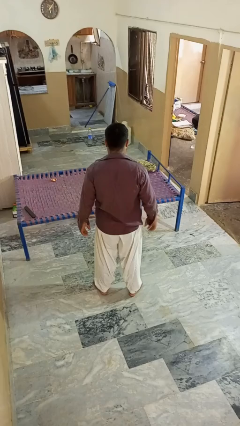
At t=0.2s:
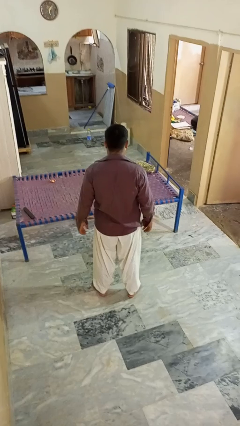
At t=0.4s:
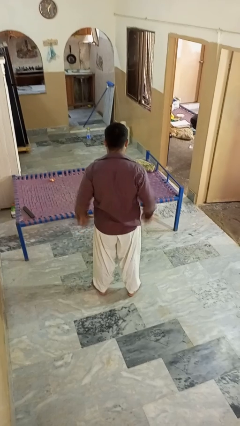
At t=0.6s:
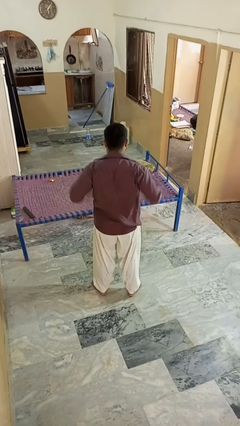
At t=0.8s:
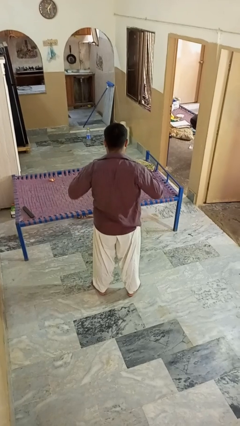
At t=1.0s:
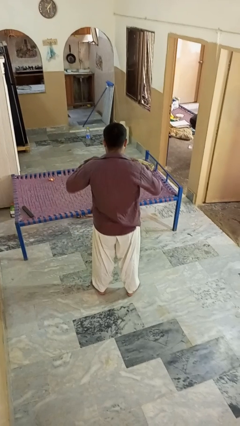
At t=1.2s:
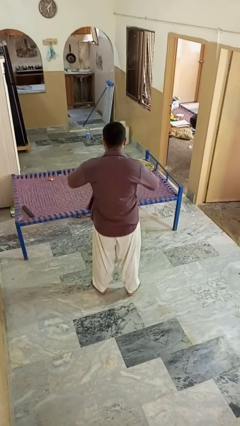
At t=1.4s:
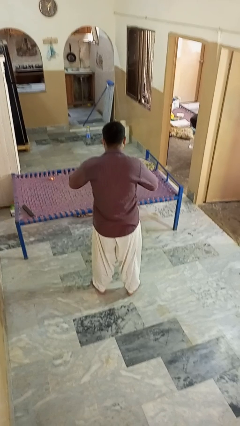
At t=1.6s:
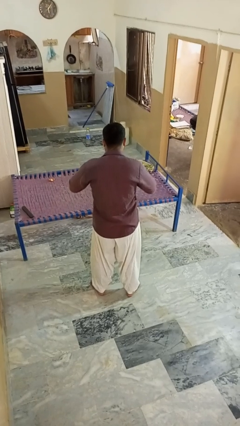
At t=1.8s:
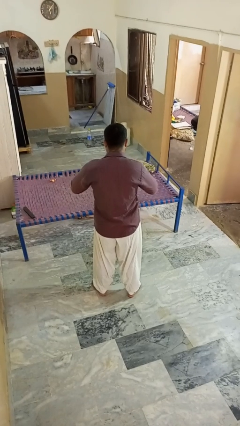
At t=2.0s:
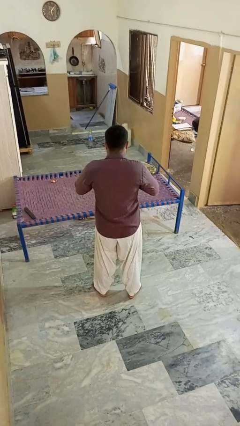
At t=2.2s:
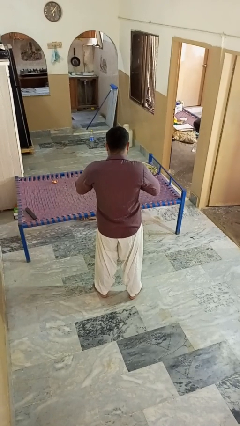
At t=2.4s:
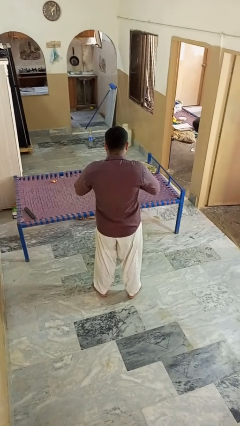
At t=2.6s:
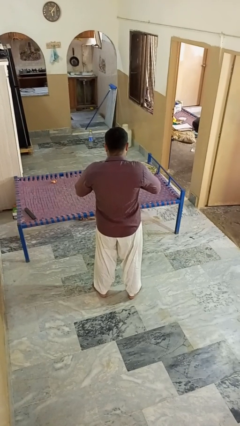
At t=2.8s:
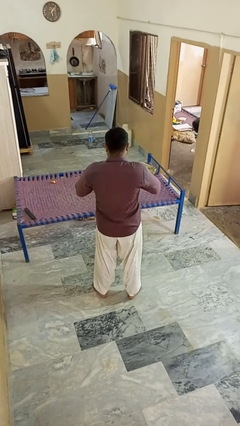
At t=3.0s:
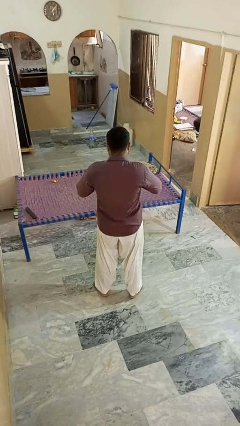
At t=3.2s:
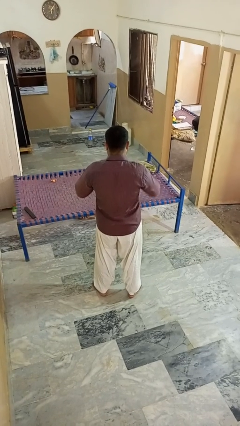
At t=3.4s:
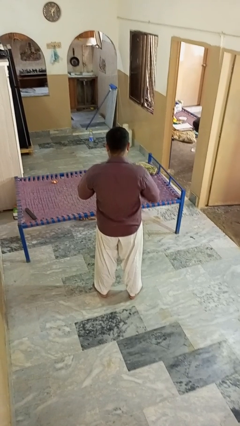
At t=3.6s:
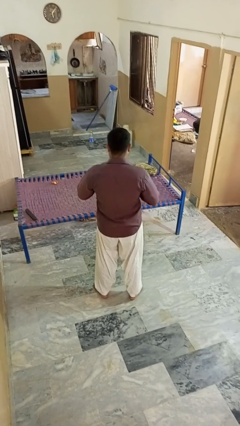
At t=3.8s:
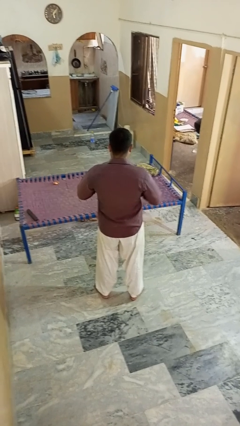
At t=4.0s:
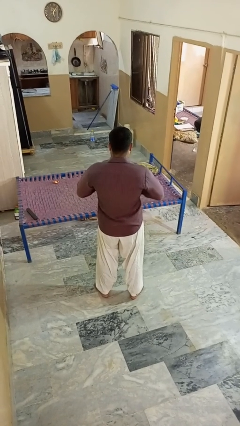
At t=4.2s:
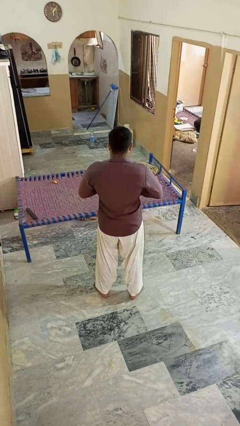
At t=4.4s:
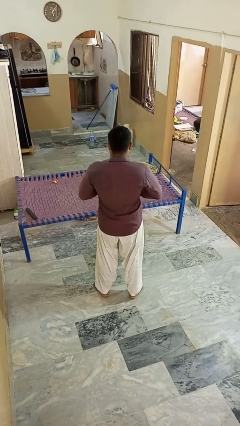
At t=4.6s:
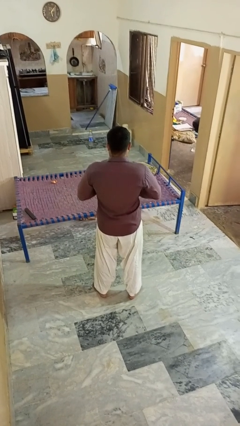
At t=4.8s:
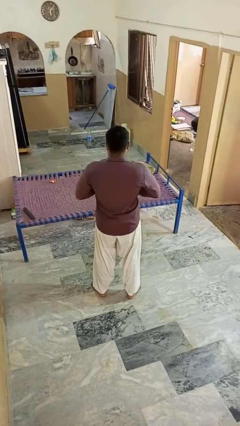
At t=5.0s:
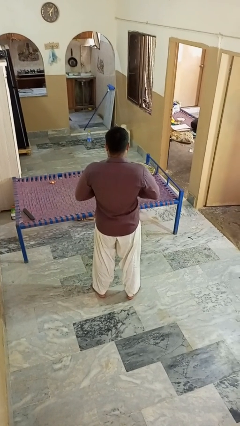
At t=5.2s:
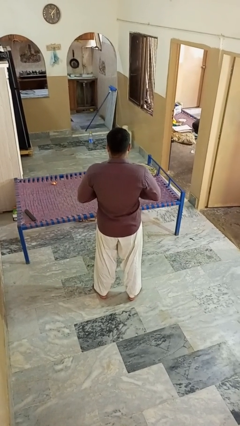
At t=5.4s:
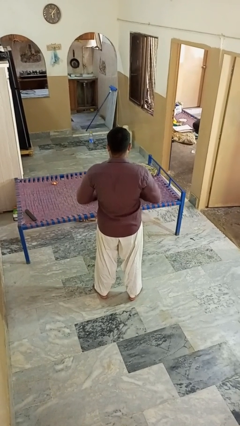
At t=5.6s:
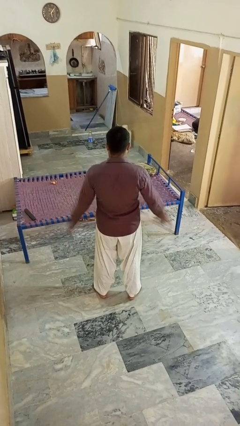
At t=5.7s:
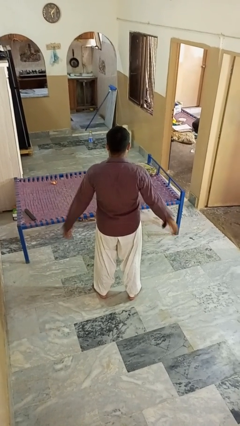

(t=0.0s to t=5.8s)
person buttons shirt

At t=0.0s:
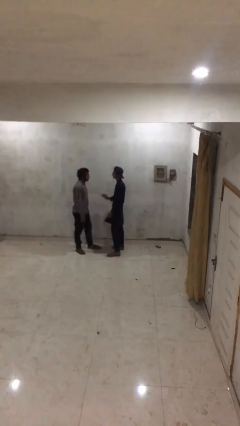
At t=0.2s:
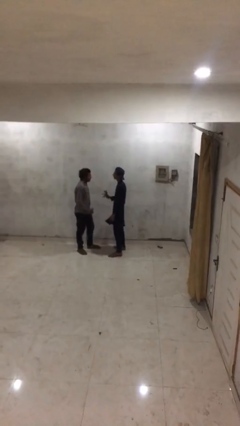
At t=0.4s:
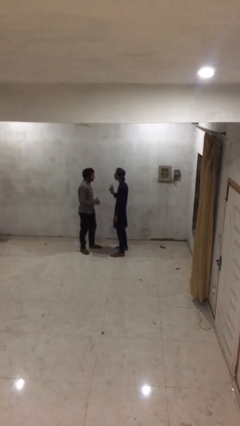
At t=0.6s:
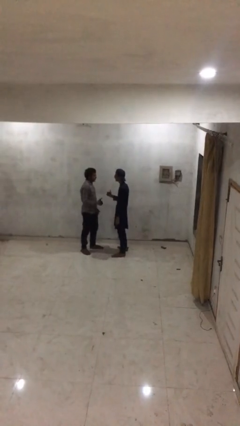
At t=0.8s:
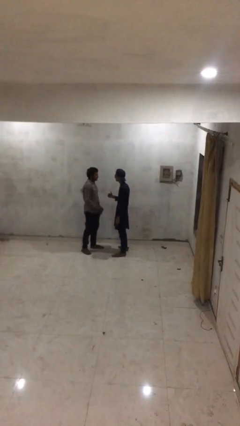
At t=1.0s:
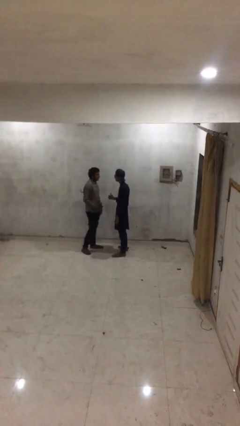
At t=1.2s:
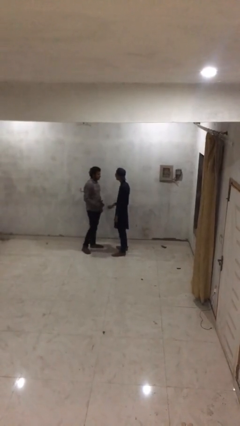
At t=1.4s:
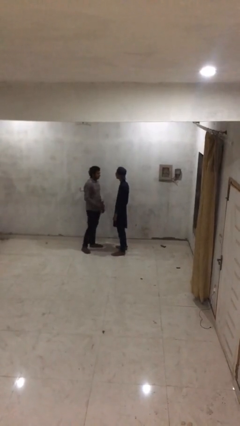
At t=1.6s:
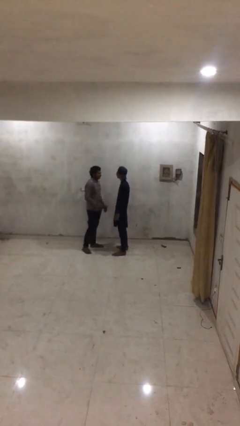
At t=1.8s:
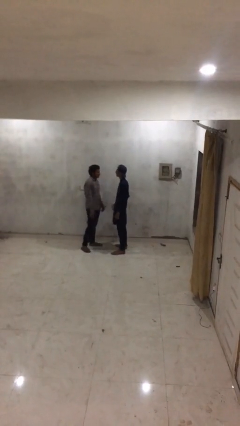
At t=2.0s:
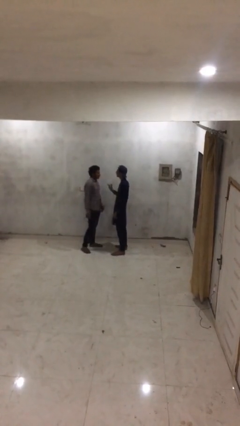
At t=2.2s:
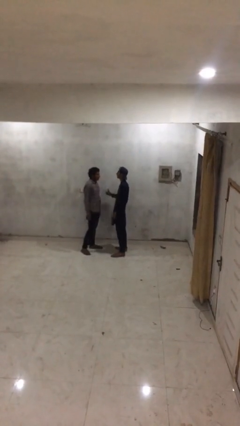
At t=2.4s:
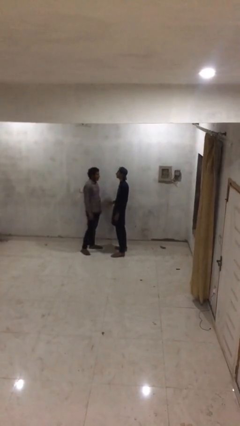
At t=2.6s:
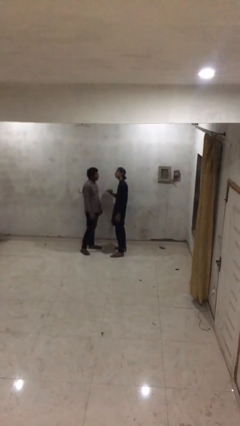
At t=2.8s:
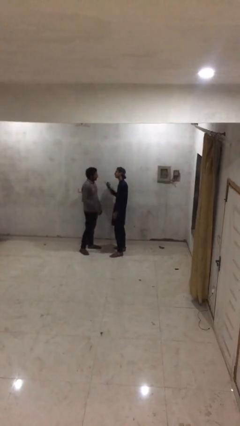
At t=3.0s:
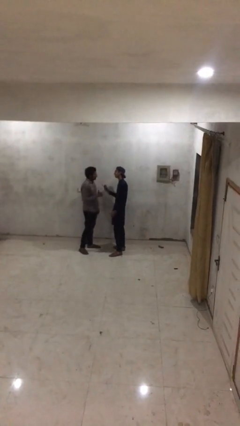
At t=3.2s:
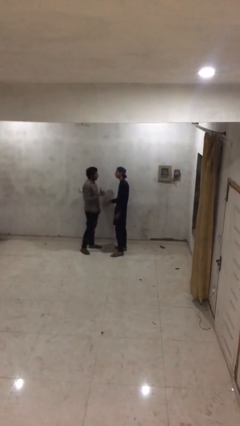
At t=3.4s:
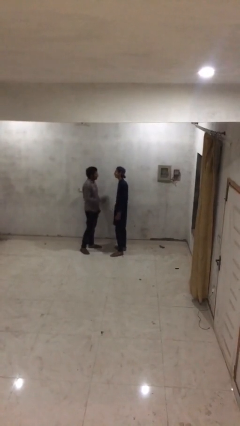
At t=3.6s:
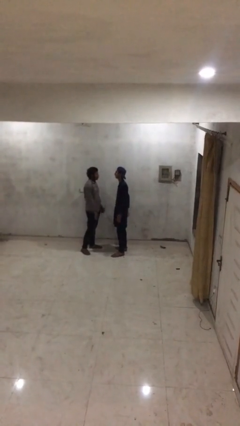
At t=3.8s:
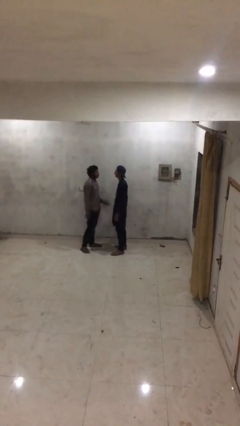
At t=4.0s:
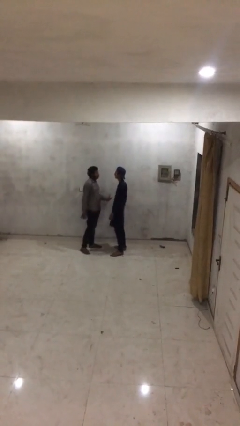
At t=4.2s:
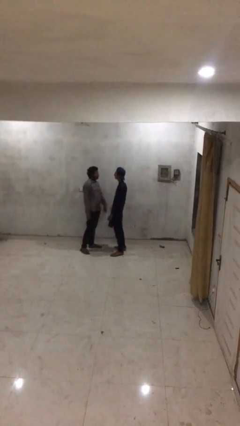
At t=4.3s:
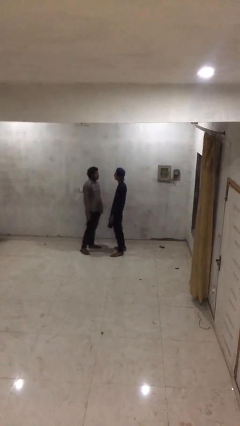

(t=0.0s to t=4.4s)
person talks to person

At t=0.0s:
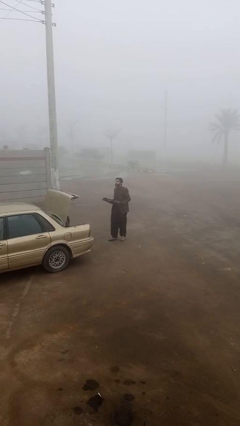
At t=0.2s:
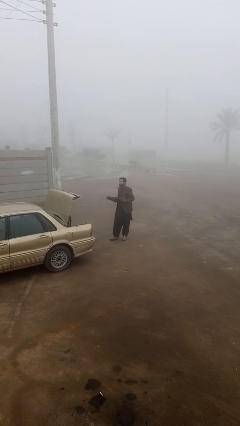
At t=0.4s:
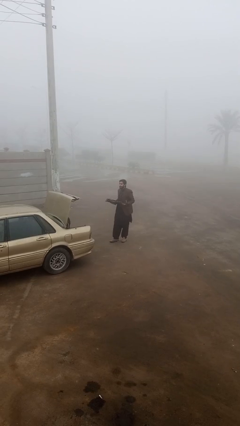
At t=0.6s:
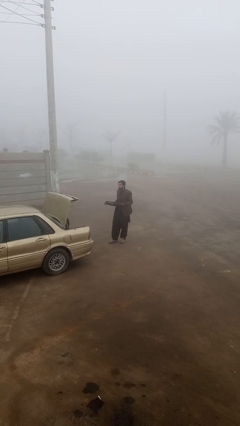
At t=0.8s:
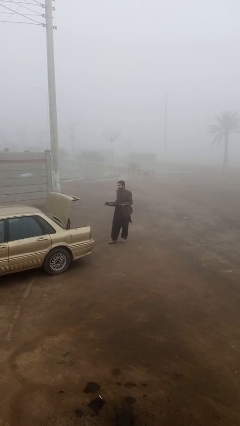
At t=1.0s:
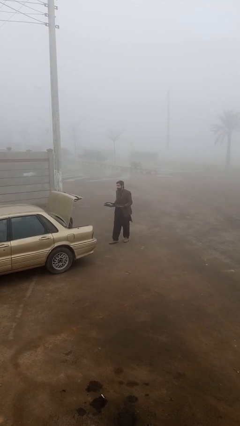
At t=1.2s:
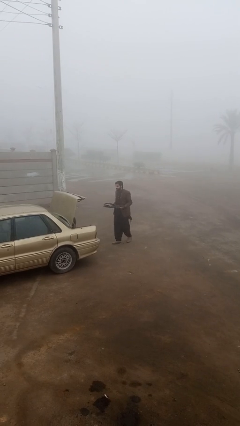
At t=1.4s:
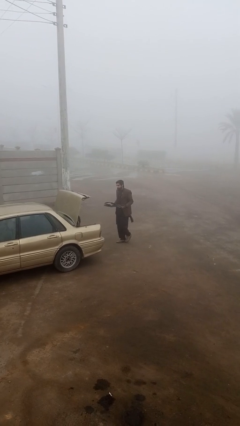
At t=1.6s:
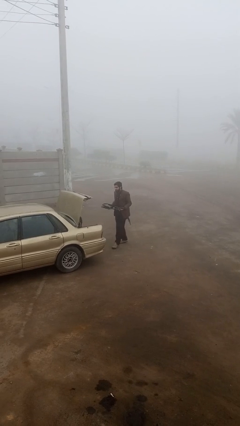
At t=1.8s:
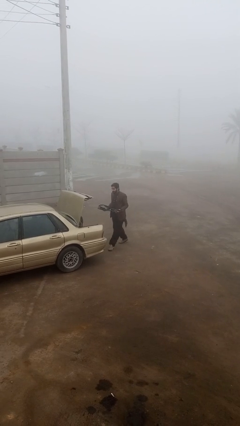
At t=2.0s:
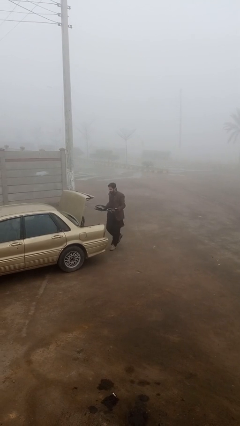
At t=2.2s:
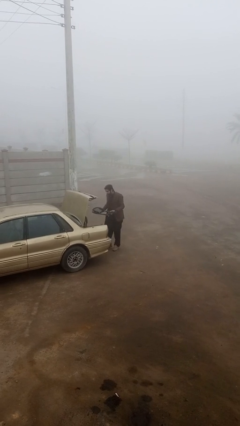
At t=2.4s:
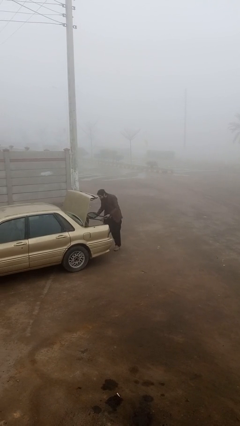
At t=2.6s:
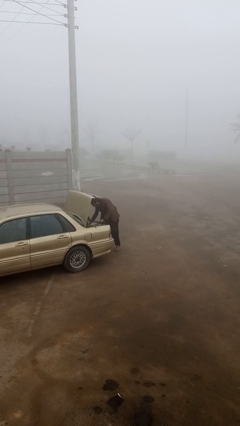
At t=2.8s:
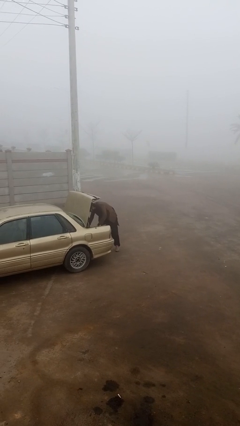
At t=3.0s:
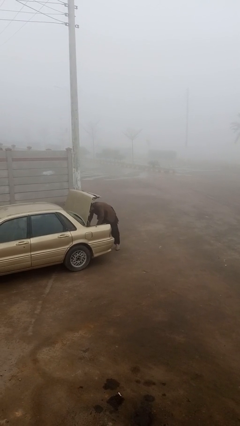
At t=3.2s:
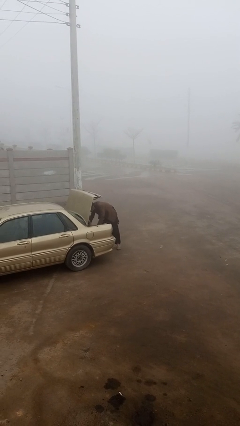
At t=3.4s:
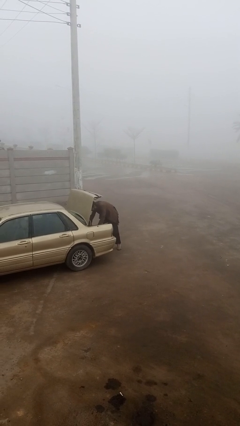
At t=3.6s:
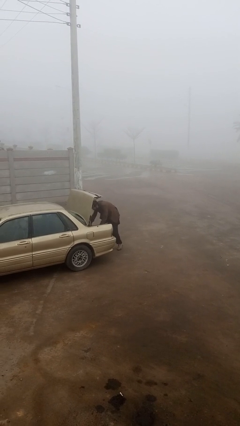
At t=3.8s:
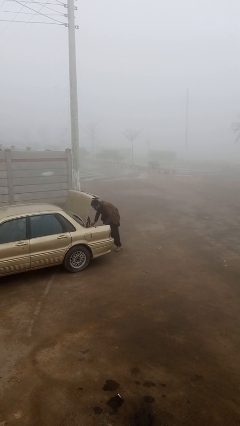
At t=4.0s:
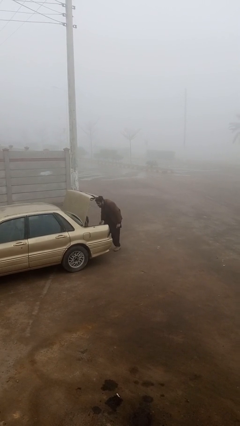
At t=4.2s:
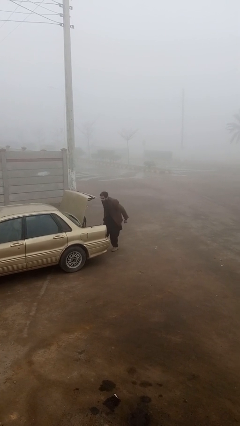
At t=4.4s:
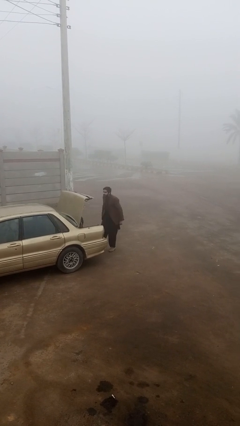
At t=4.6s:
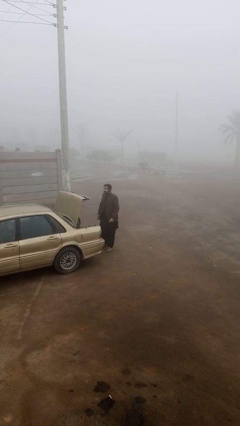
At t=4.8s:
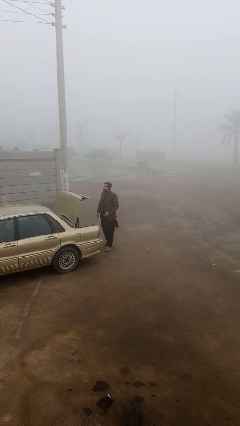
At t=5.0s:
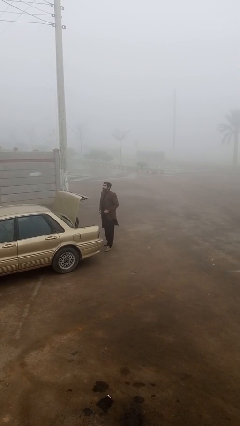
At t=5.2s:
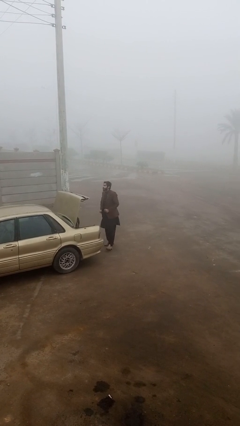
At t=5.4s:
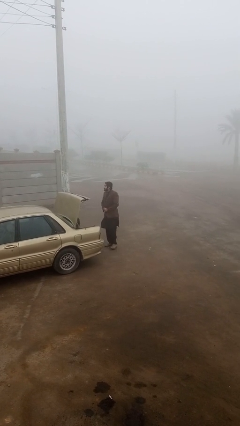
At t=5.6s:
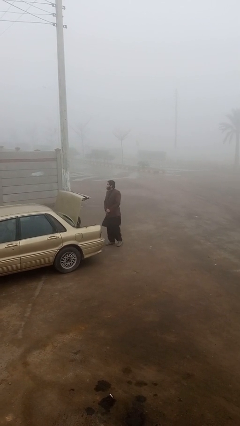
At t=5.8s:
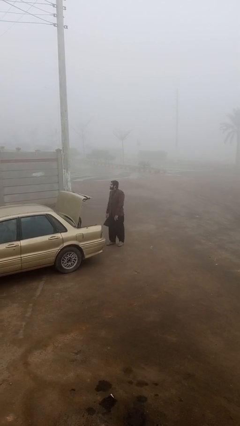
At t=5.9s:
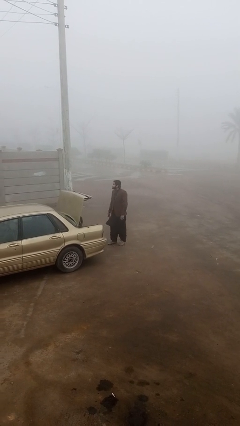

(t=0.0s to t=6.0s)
person loads car

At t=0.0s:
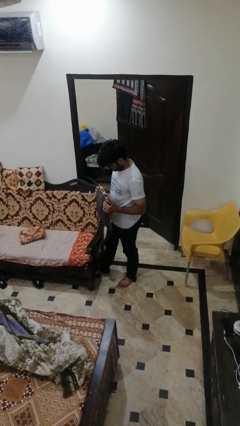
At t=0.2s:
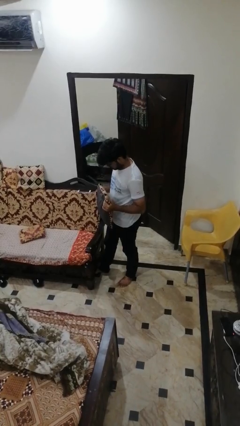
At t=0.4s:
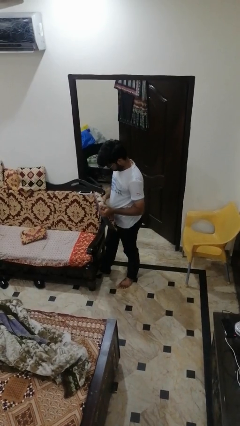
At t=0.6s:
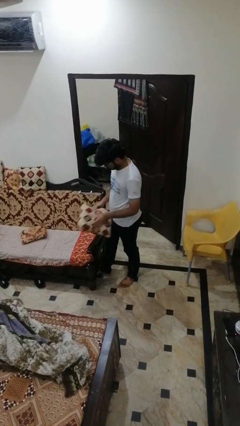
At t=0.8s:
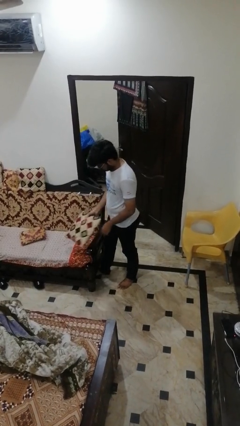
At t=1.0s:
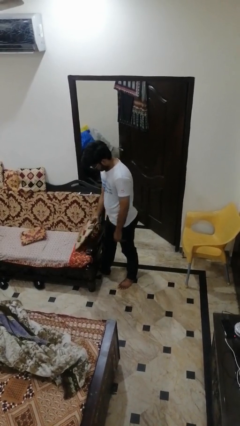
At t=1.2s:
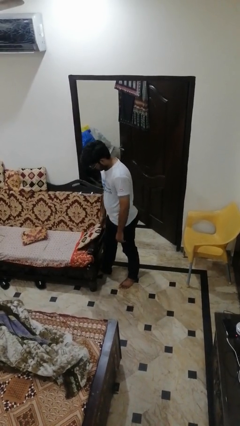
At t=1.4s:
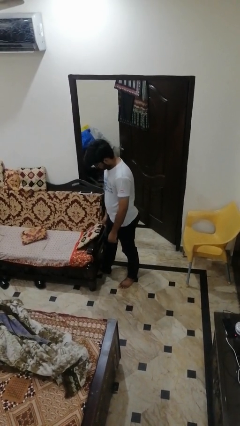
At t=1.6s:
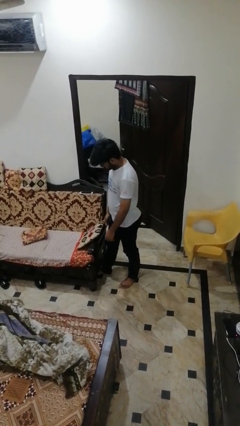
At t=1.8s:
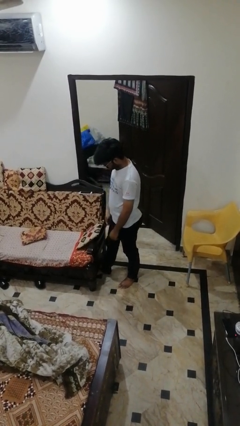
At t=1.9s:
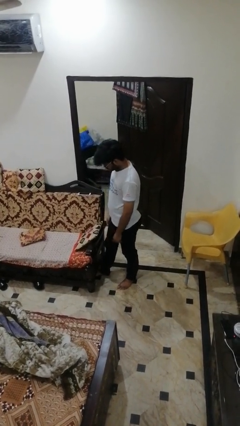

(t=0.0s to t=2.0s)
person puts down object on couch
